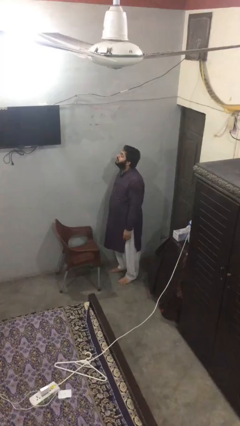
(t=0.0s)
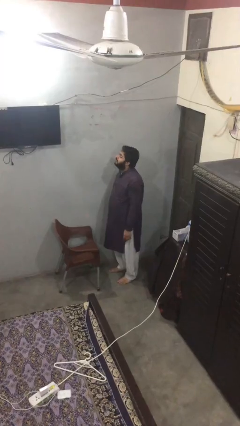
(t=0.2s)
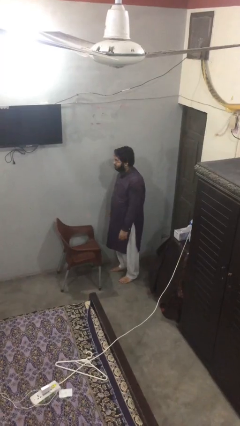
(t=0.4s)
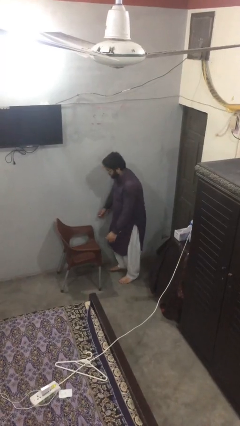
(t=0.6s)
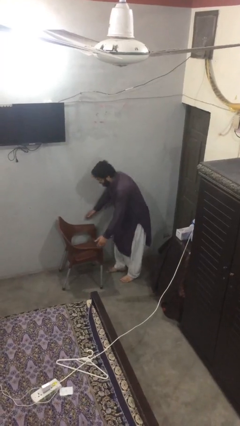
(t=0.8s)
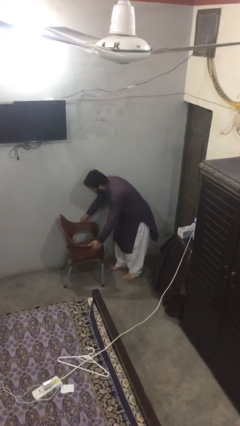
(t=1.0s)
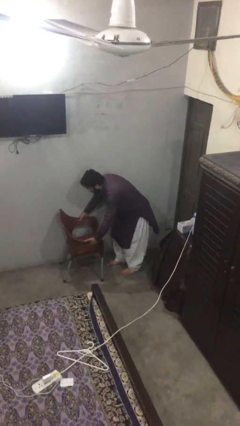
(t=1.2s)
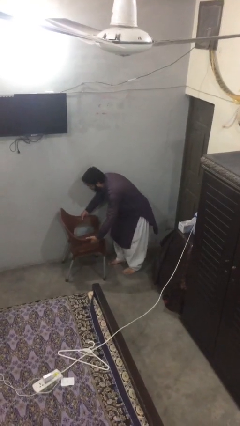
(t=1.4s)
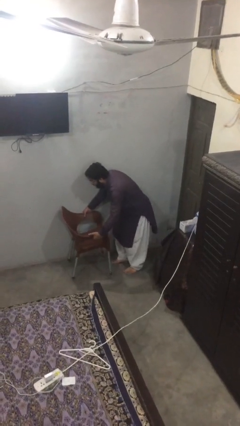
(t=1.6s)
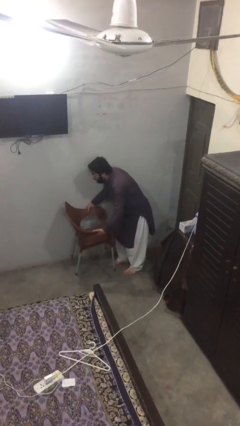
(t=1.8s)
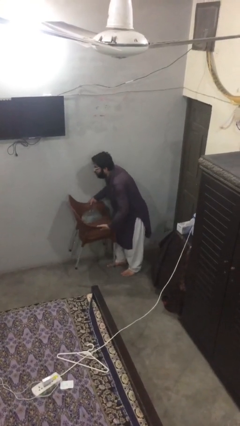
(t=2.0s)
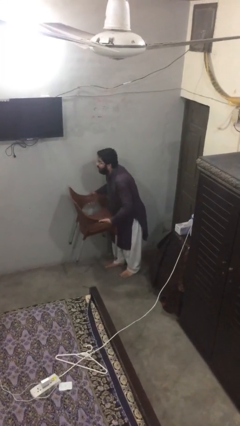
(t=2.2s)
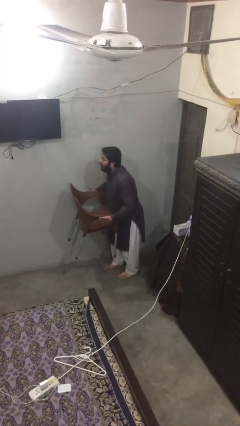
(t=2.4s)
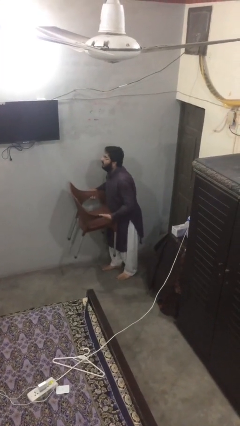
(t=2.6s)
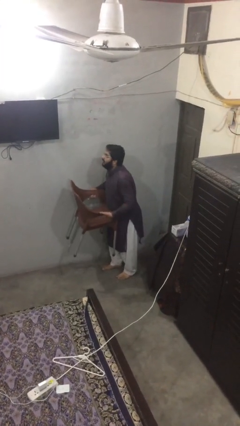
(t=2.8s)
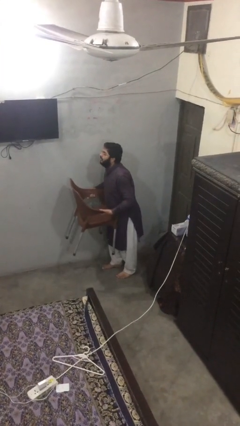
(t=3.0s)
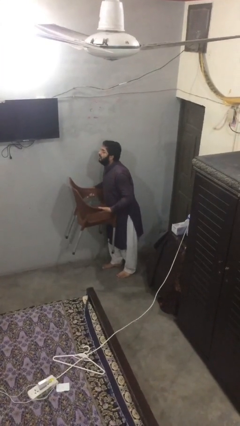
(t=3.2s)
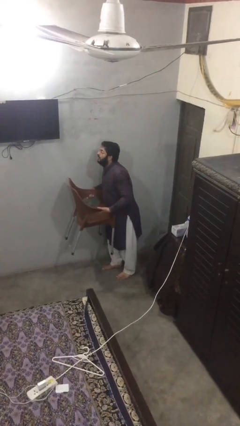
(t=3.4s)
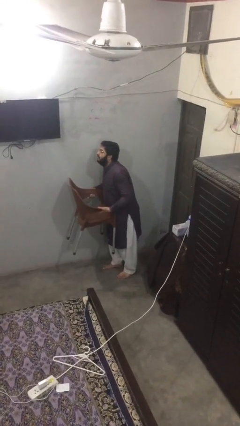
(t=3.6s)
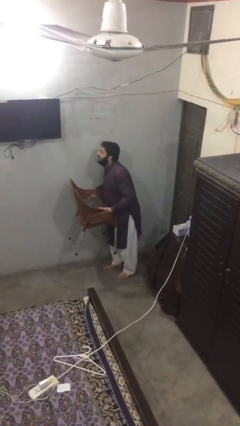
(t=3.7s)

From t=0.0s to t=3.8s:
person picks up object from floor

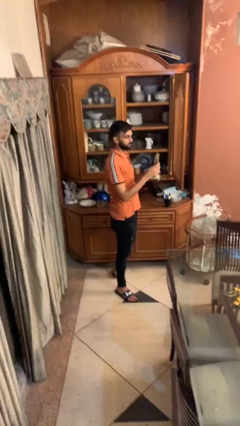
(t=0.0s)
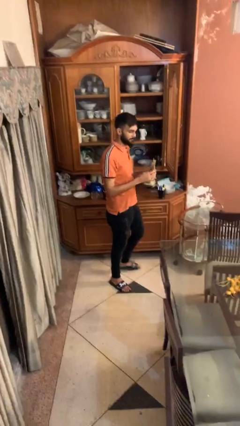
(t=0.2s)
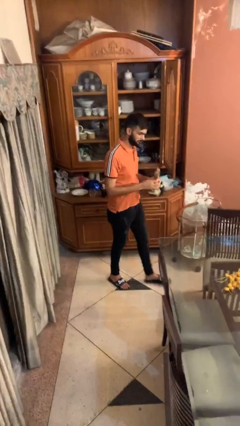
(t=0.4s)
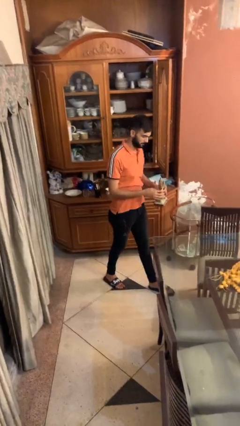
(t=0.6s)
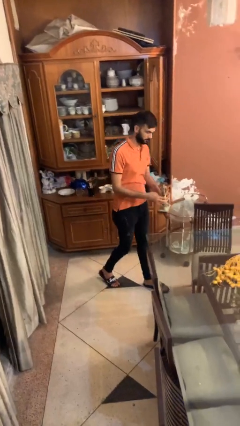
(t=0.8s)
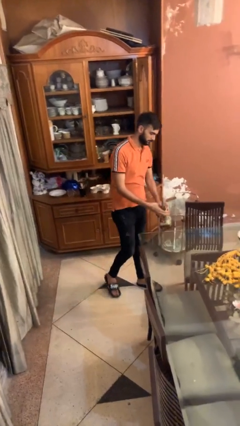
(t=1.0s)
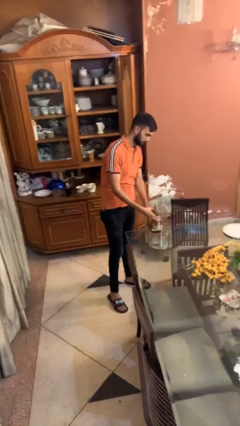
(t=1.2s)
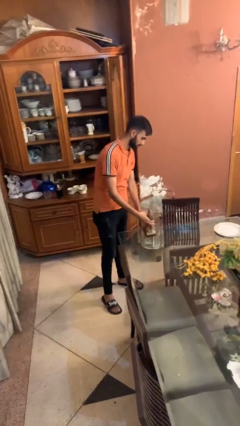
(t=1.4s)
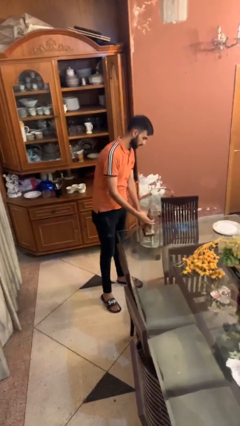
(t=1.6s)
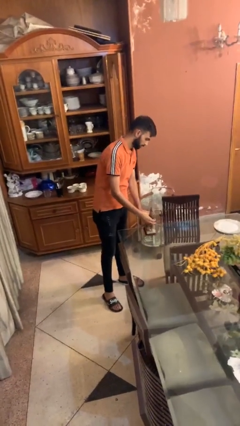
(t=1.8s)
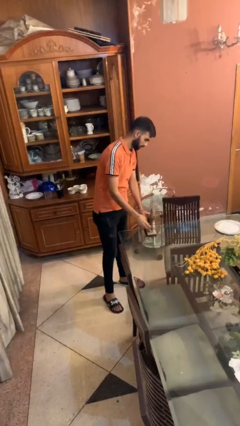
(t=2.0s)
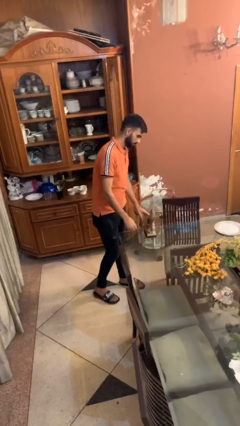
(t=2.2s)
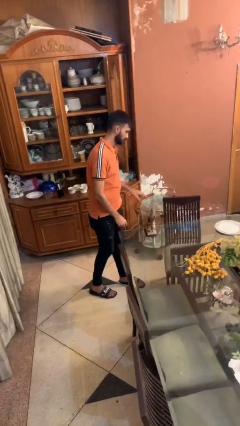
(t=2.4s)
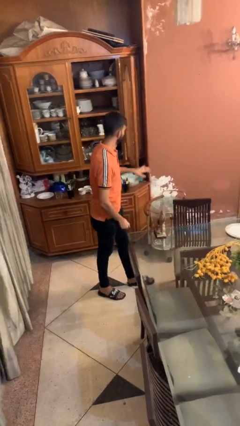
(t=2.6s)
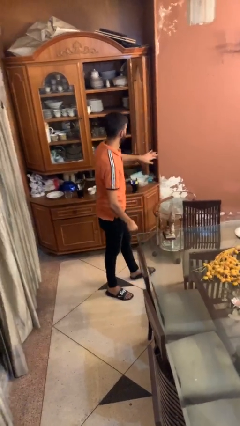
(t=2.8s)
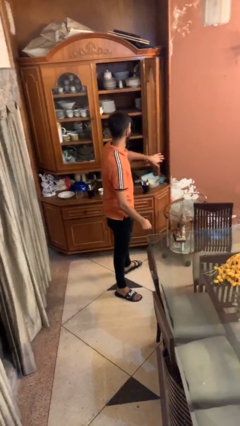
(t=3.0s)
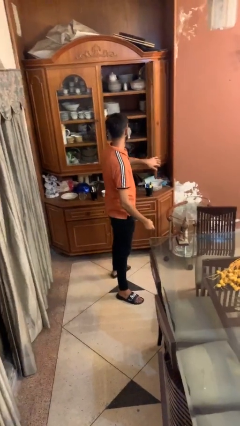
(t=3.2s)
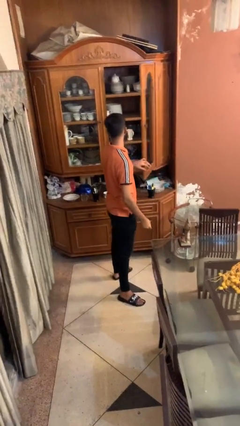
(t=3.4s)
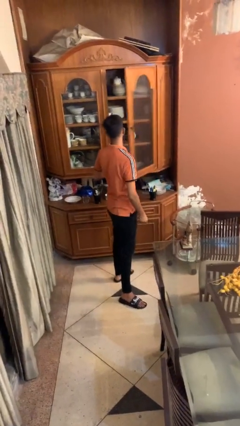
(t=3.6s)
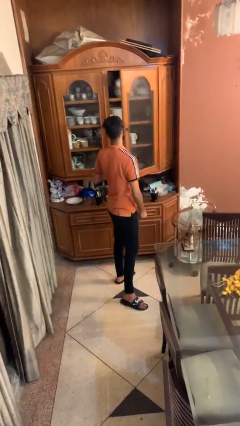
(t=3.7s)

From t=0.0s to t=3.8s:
person puts down object on table

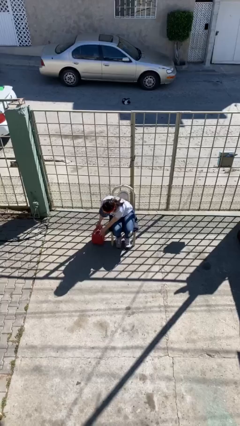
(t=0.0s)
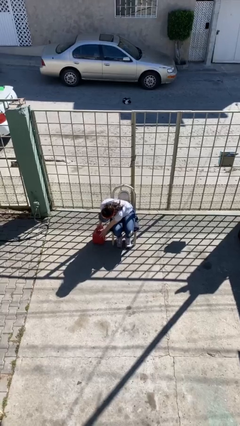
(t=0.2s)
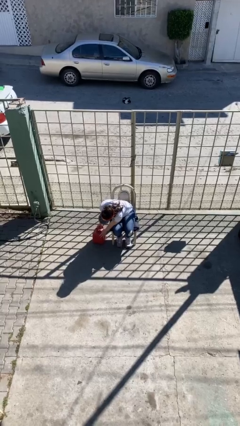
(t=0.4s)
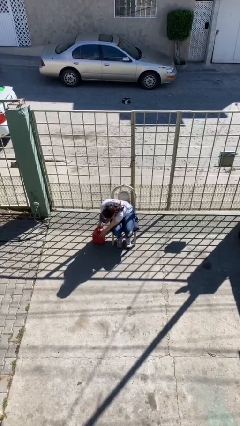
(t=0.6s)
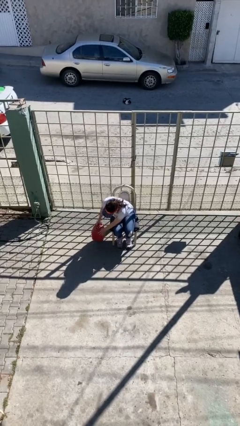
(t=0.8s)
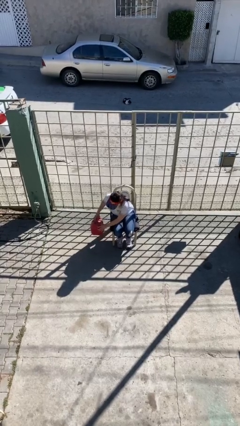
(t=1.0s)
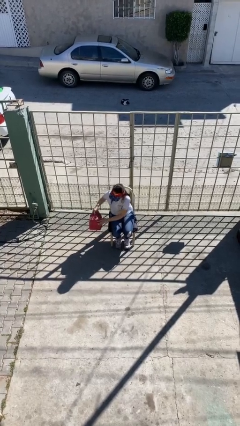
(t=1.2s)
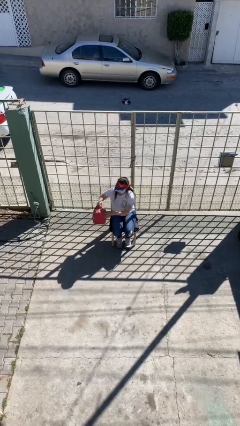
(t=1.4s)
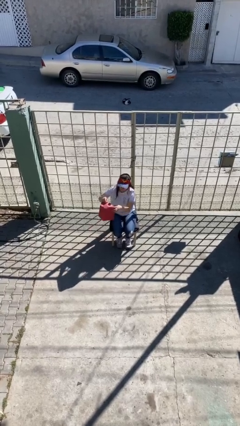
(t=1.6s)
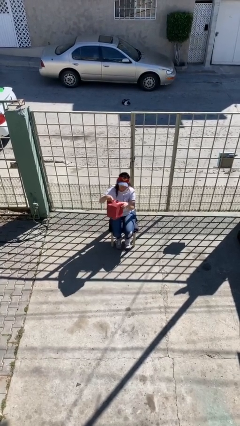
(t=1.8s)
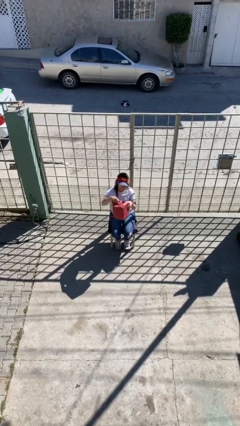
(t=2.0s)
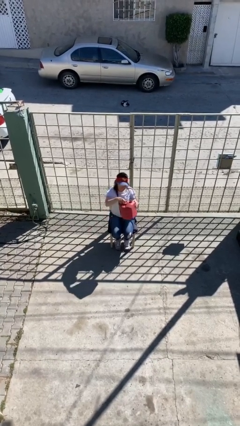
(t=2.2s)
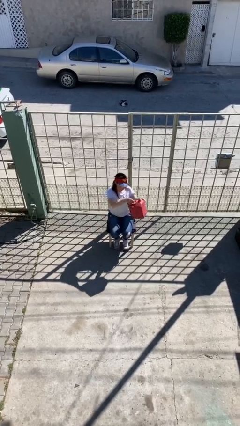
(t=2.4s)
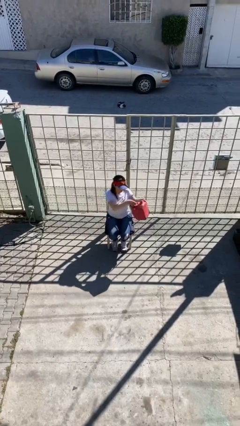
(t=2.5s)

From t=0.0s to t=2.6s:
person picks up object from table

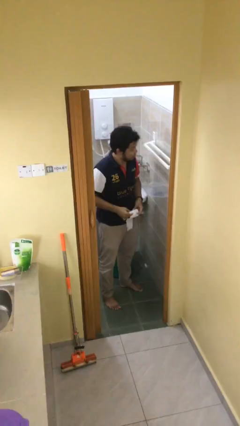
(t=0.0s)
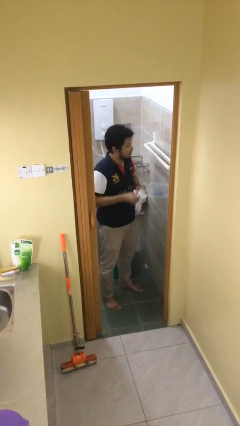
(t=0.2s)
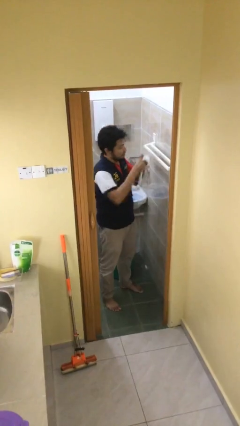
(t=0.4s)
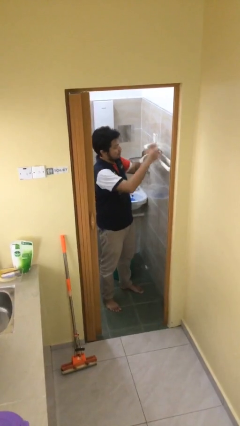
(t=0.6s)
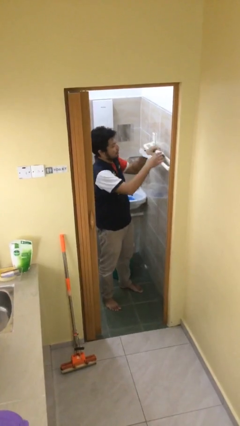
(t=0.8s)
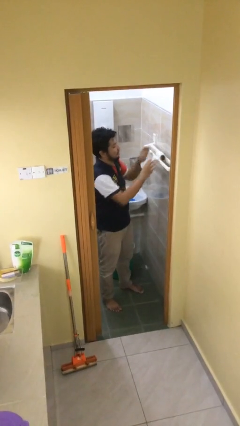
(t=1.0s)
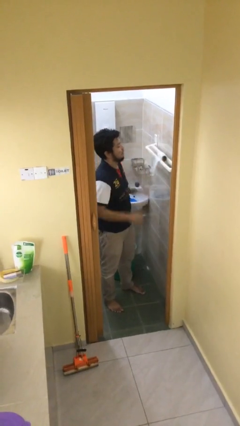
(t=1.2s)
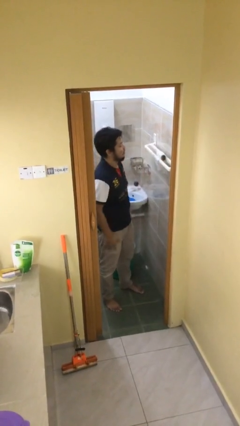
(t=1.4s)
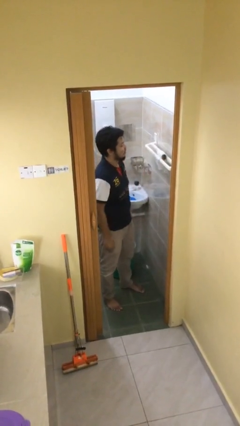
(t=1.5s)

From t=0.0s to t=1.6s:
person puts down object on countertop

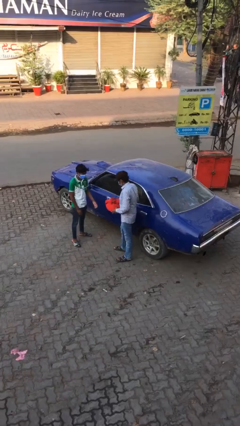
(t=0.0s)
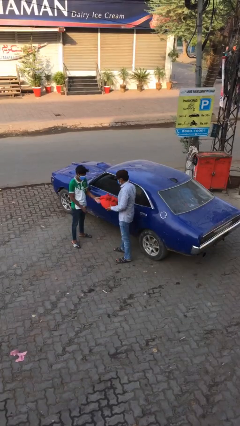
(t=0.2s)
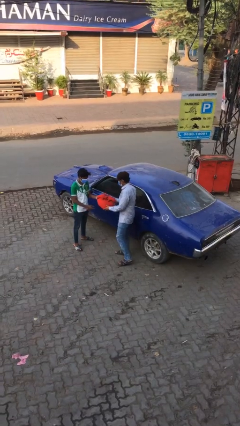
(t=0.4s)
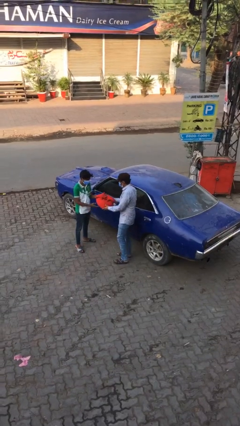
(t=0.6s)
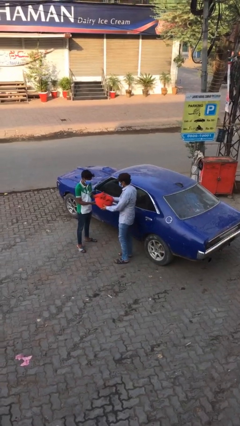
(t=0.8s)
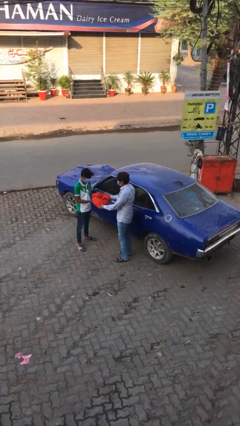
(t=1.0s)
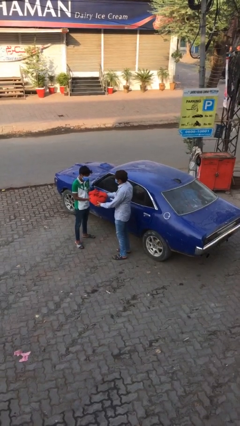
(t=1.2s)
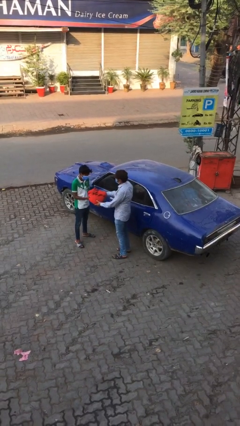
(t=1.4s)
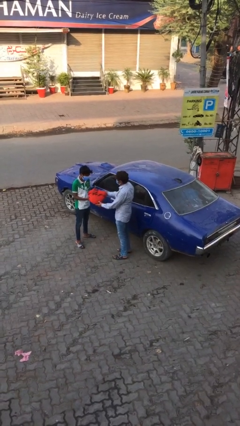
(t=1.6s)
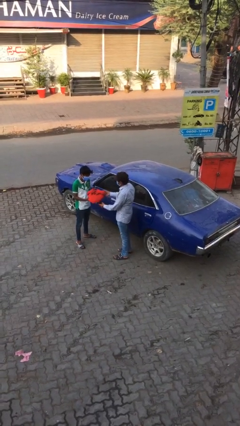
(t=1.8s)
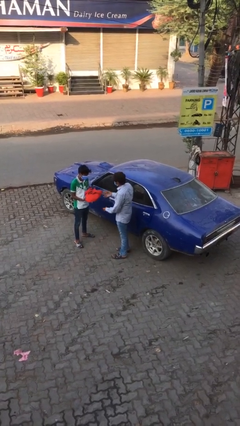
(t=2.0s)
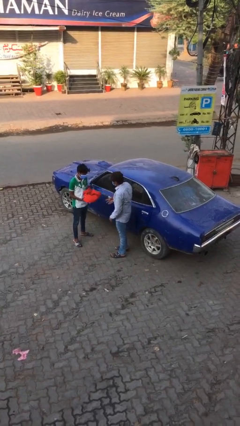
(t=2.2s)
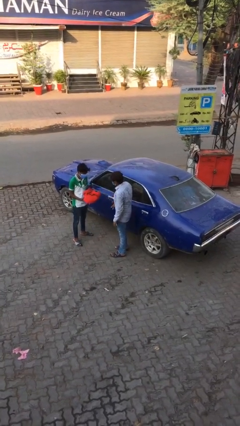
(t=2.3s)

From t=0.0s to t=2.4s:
person transfers object to person

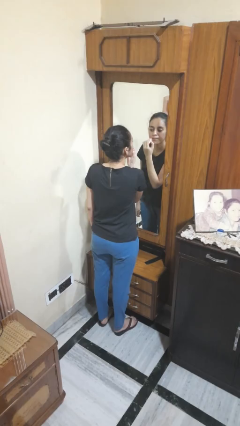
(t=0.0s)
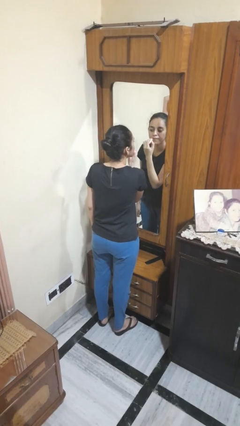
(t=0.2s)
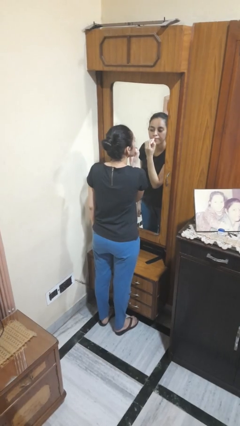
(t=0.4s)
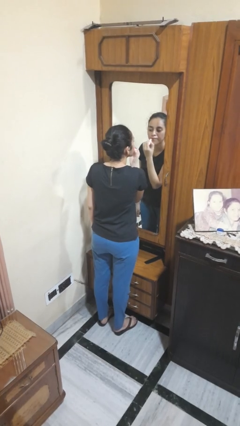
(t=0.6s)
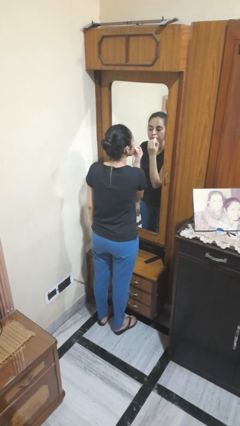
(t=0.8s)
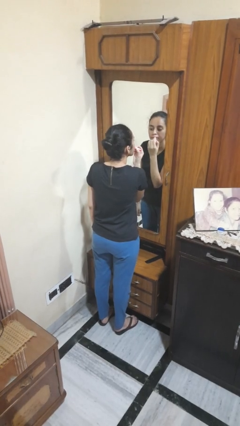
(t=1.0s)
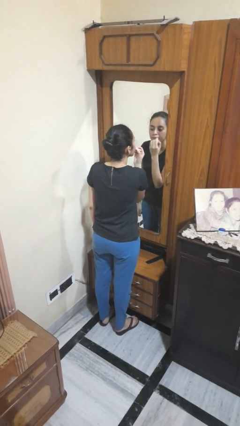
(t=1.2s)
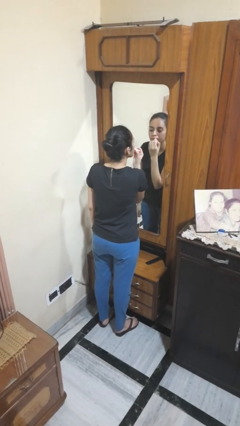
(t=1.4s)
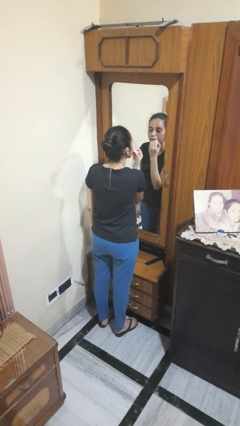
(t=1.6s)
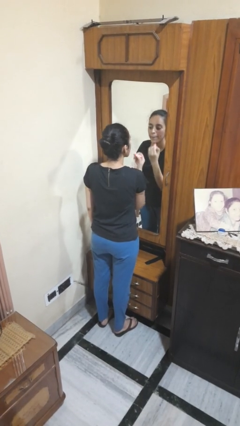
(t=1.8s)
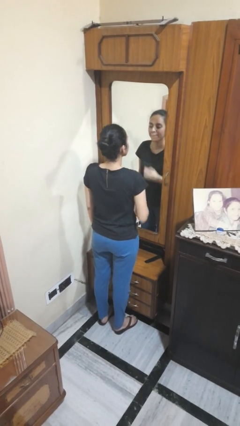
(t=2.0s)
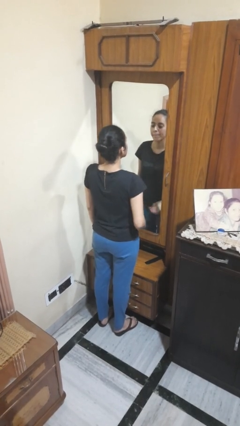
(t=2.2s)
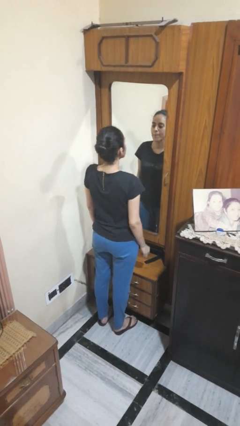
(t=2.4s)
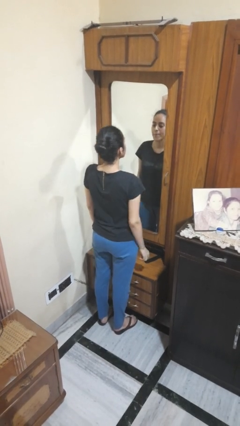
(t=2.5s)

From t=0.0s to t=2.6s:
person applies lip makeup

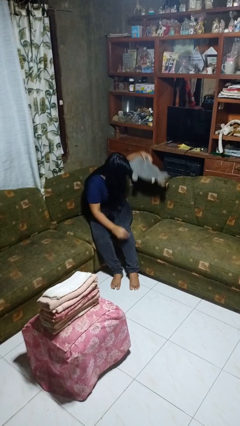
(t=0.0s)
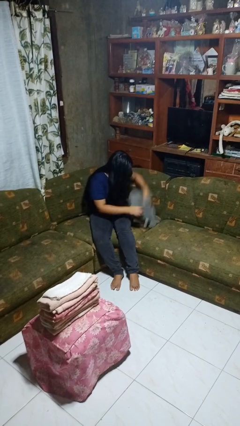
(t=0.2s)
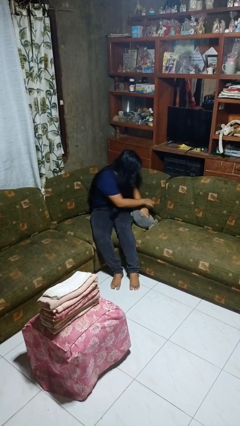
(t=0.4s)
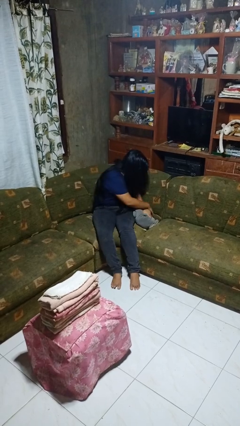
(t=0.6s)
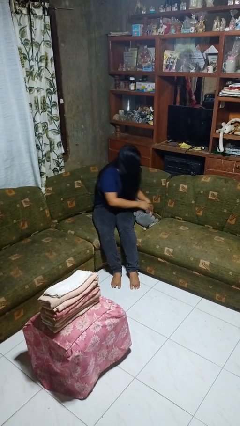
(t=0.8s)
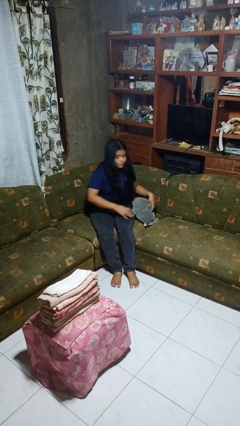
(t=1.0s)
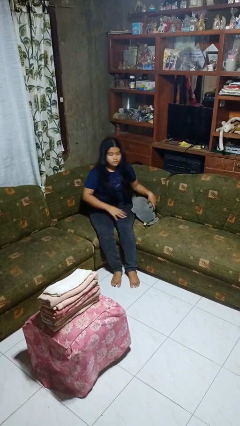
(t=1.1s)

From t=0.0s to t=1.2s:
person searches in couch
